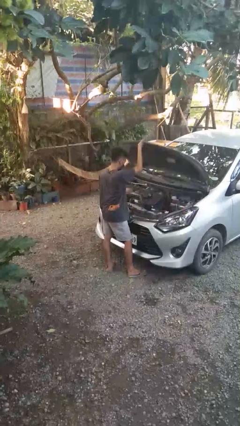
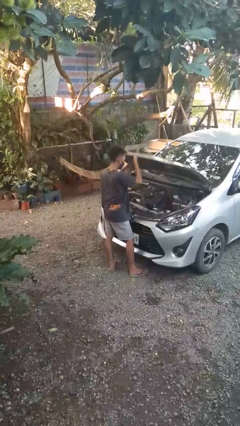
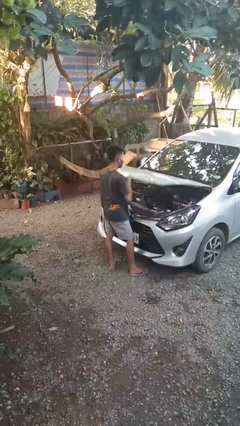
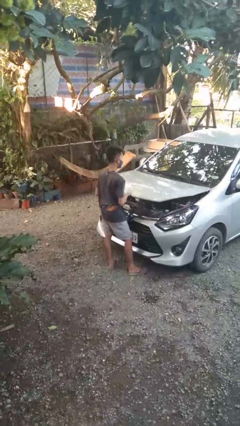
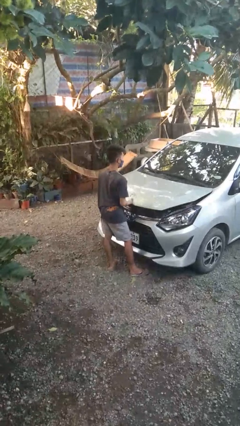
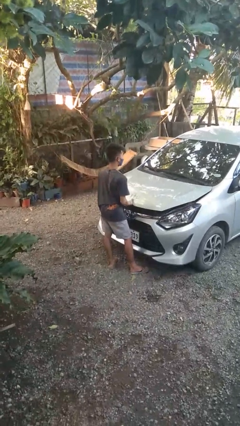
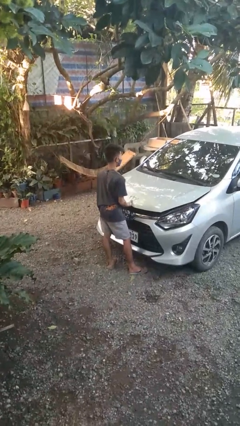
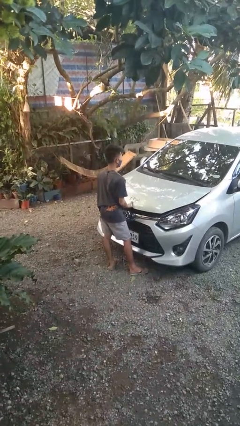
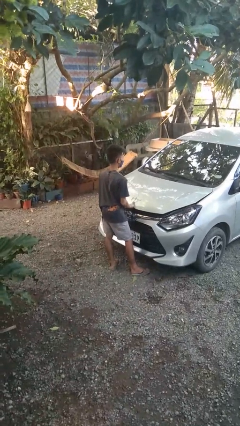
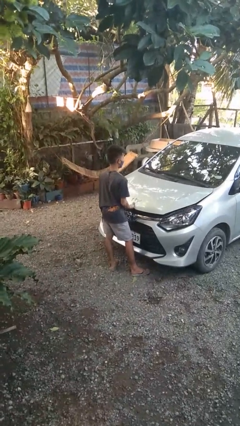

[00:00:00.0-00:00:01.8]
person closes car hood

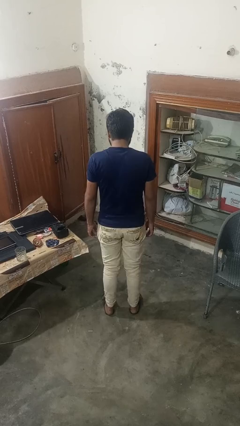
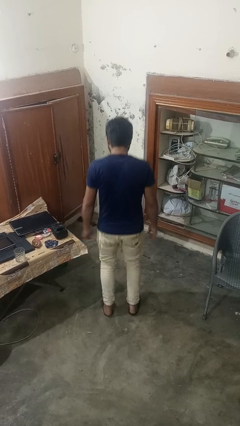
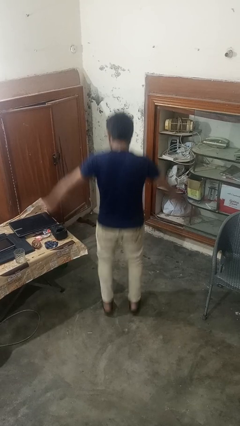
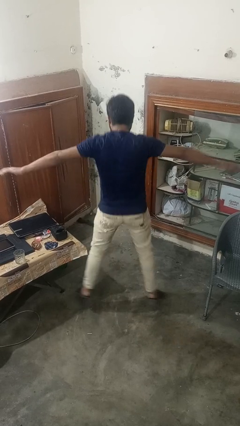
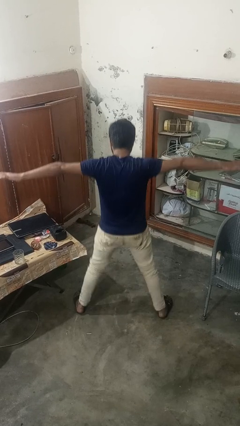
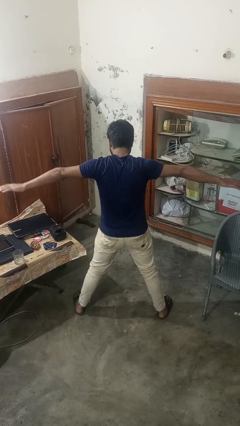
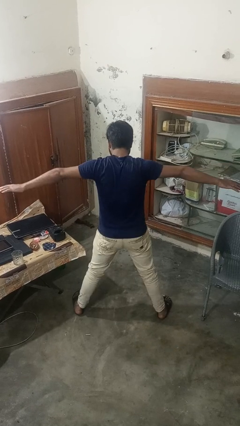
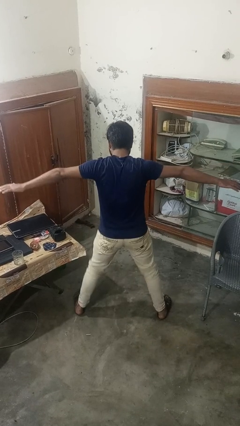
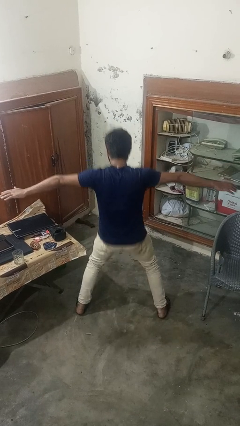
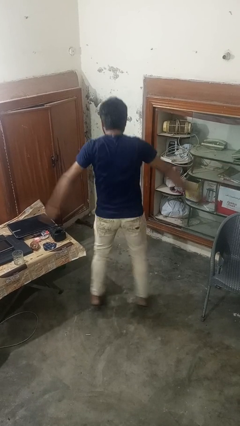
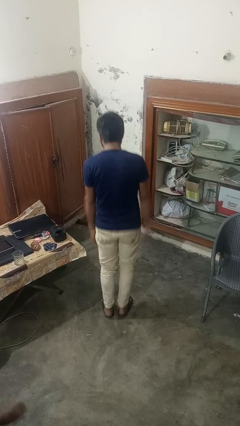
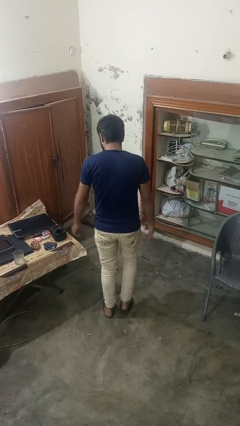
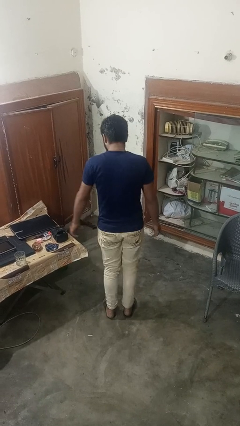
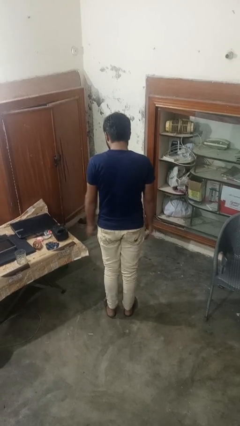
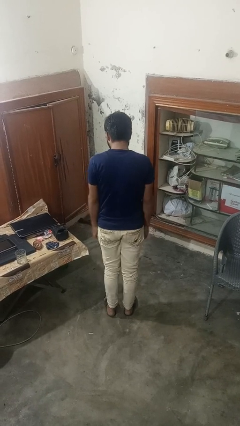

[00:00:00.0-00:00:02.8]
person exercises with jumping jacks

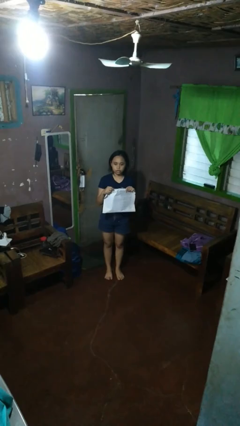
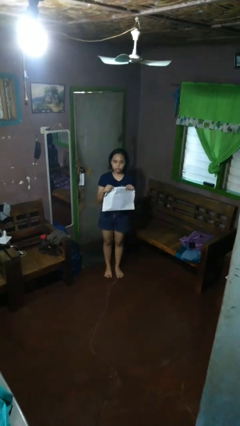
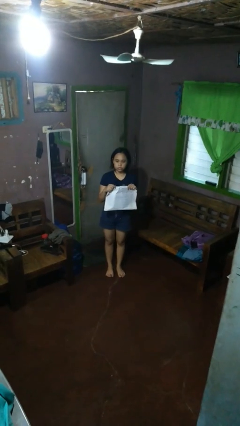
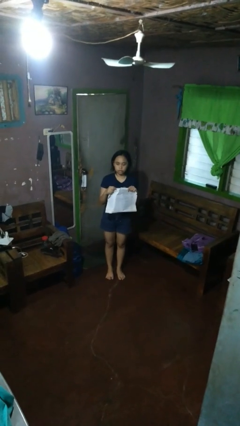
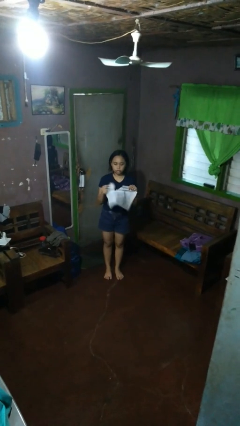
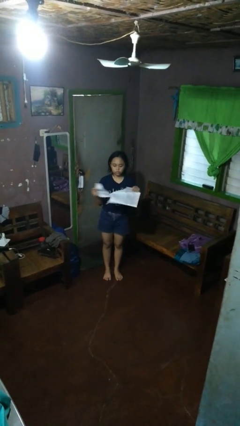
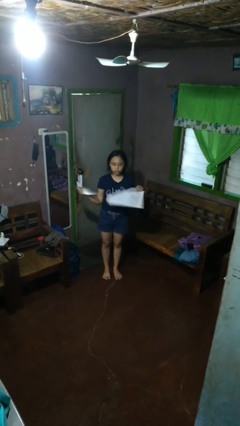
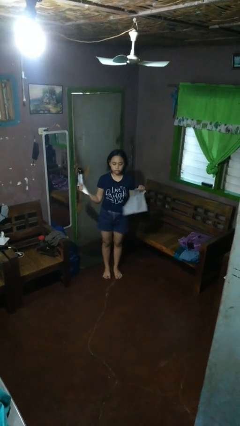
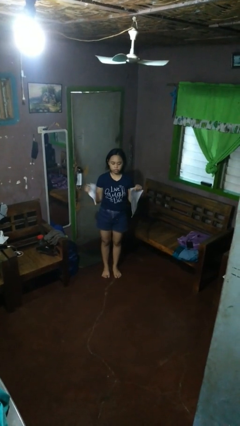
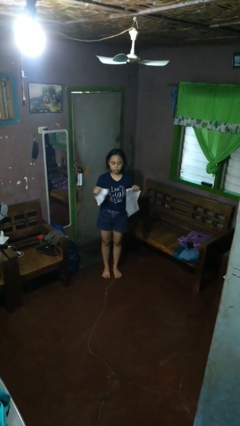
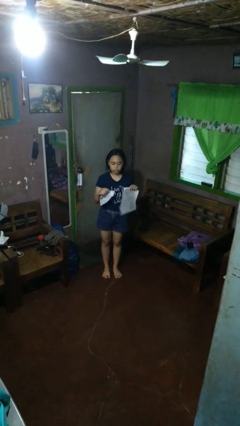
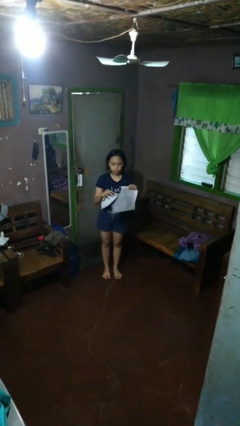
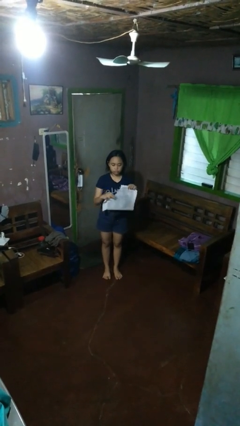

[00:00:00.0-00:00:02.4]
person tears paper

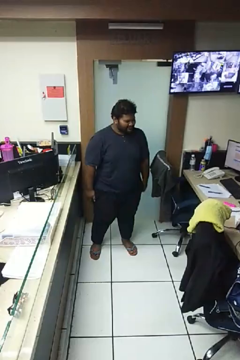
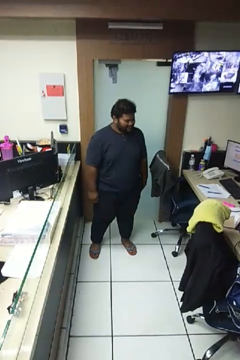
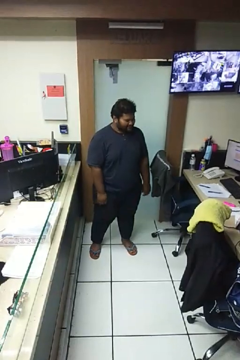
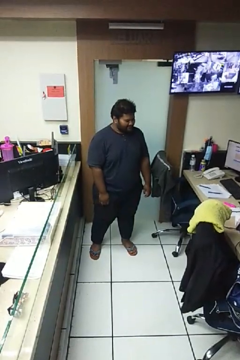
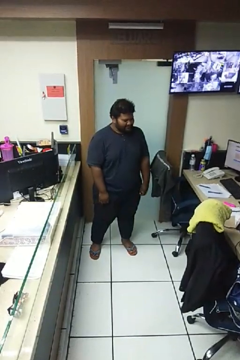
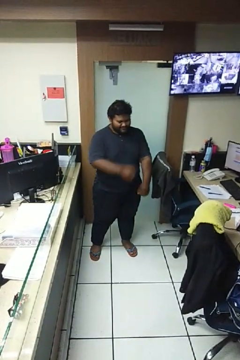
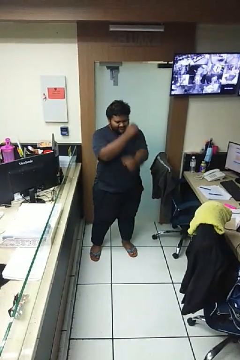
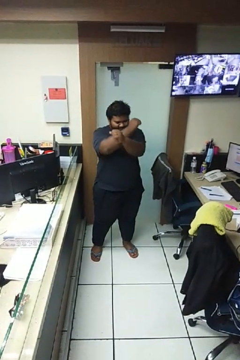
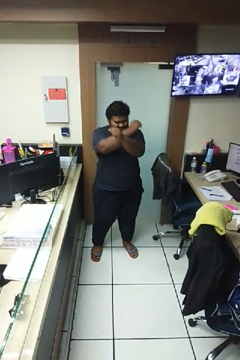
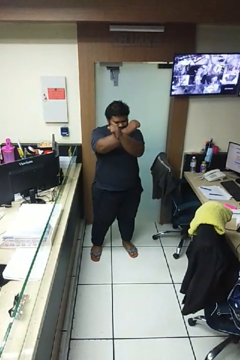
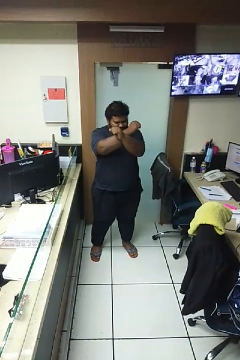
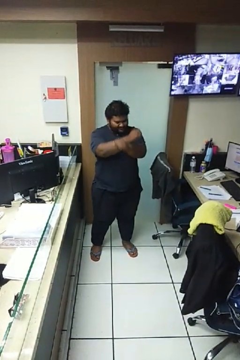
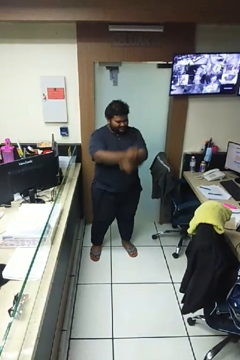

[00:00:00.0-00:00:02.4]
person gestures arms x

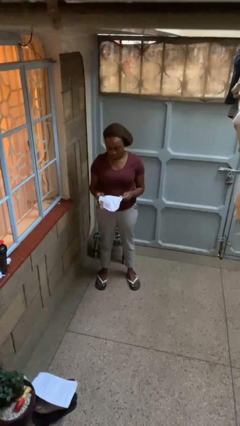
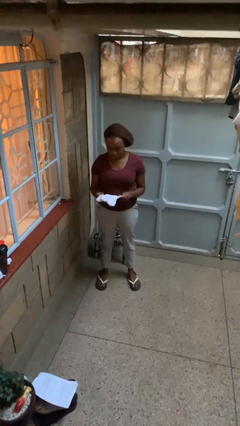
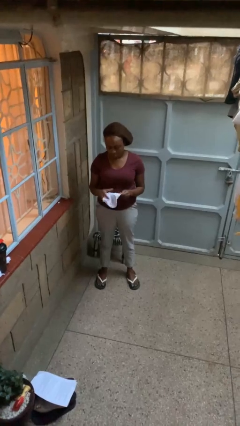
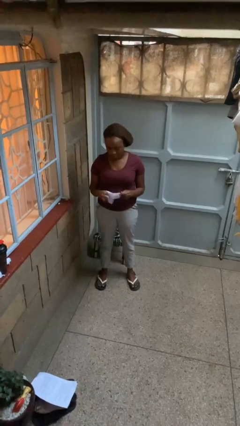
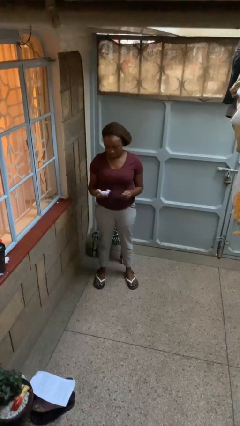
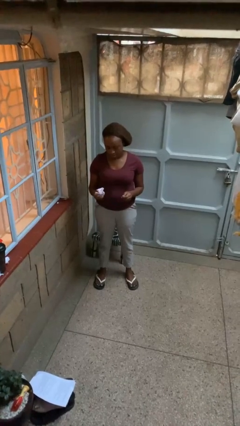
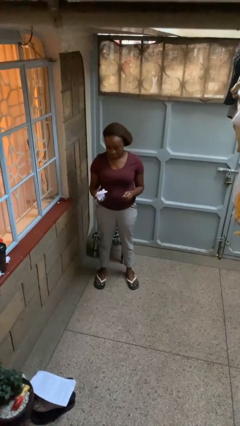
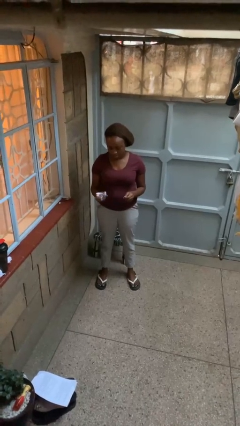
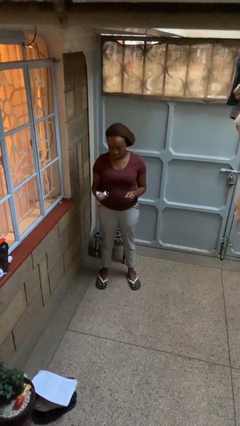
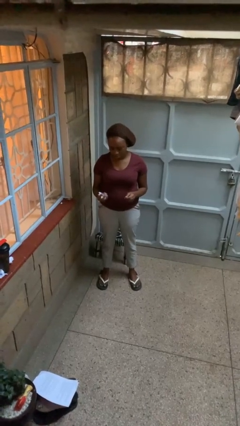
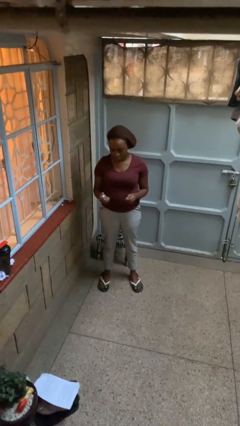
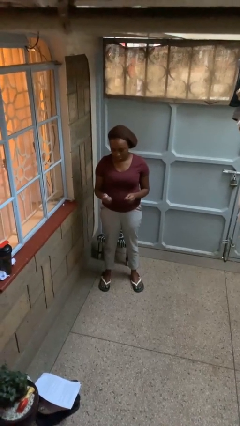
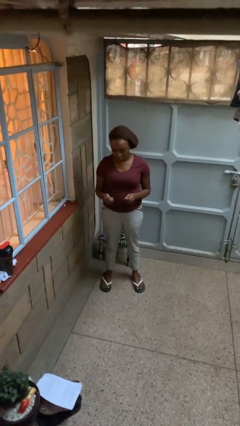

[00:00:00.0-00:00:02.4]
person crumples paper

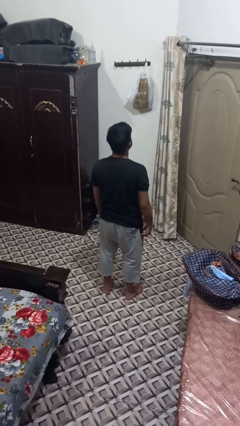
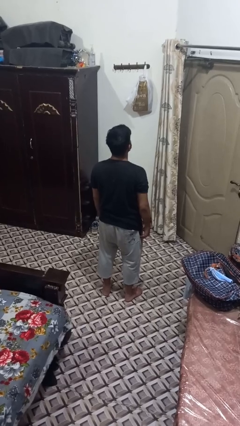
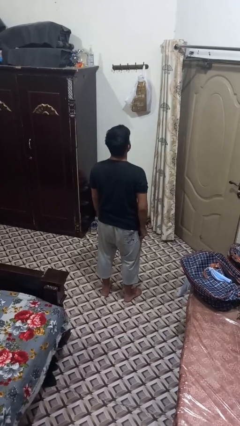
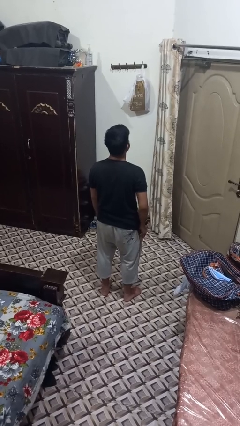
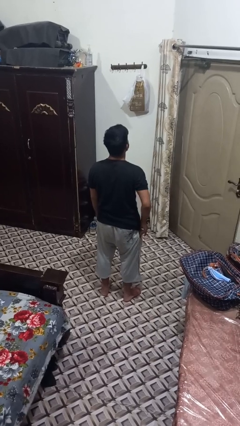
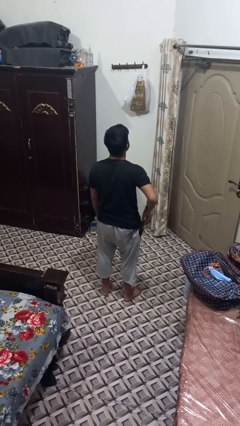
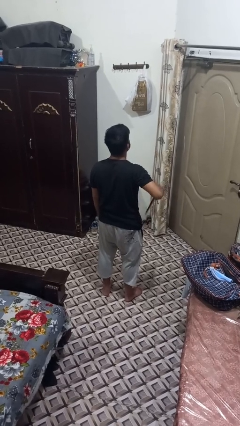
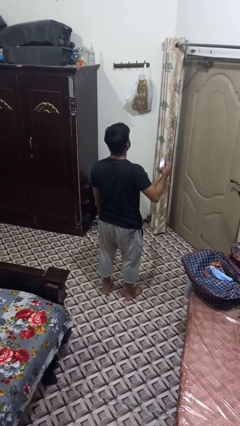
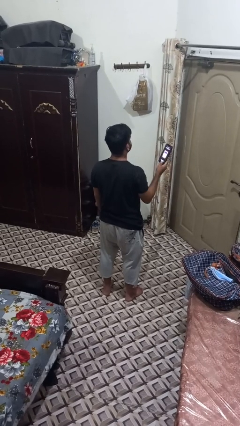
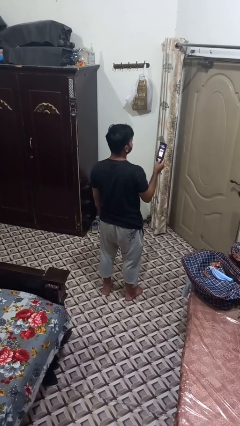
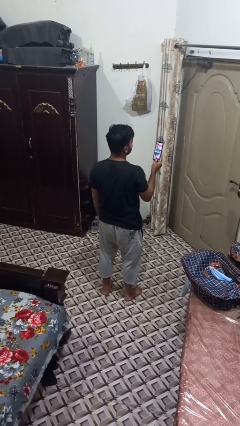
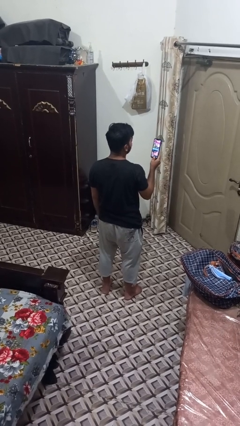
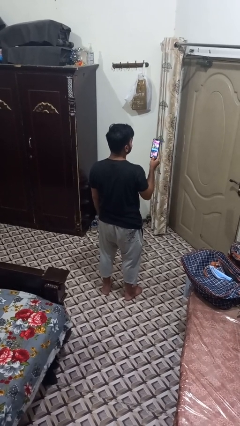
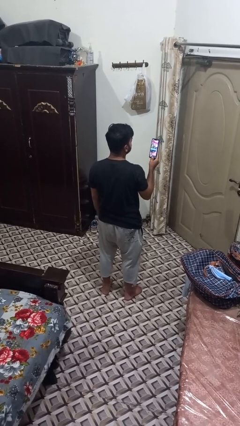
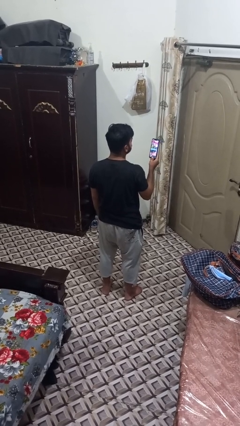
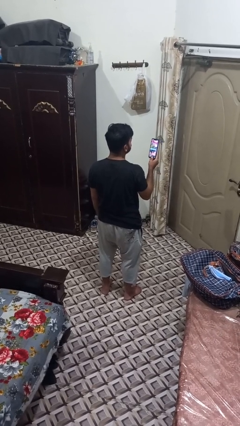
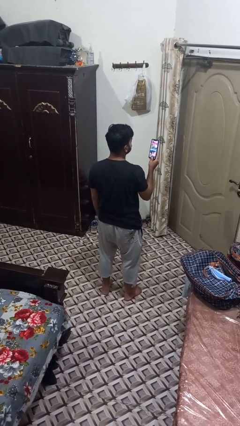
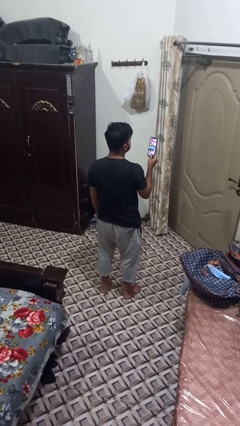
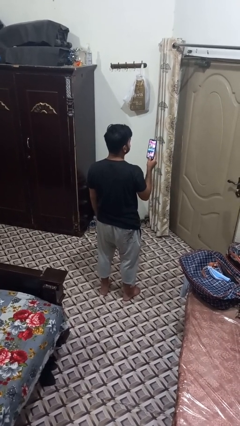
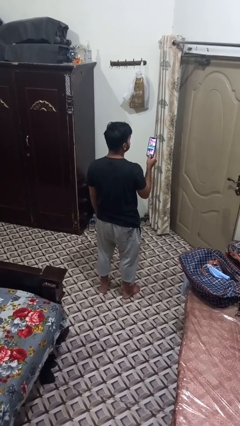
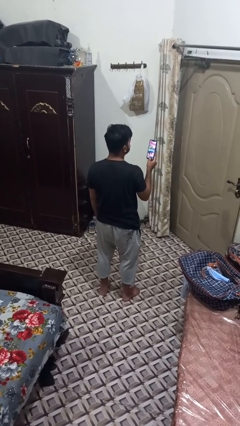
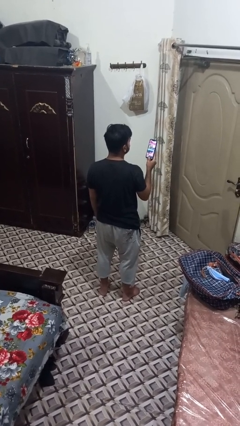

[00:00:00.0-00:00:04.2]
person takes phone from pocket

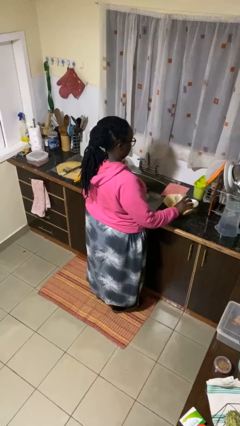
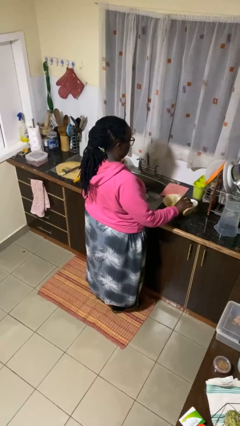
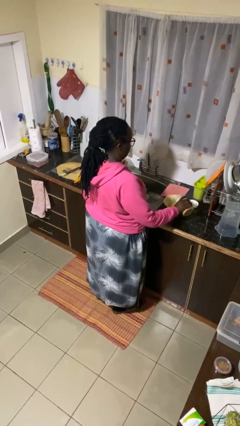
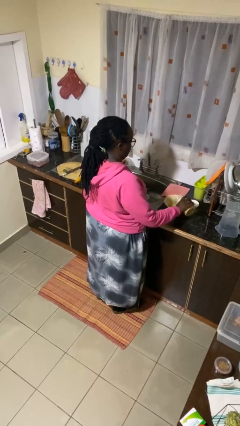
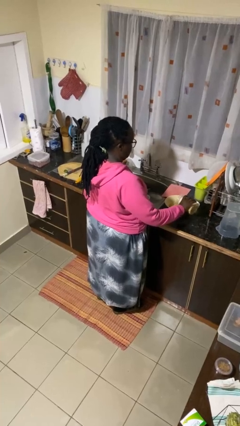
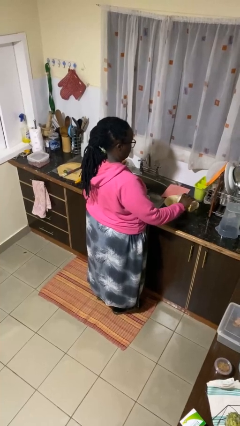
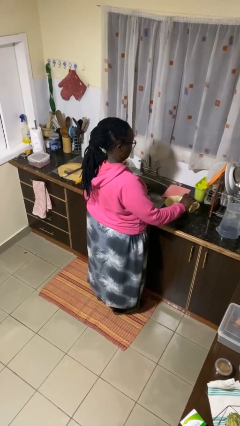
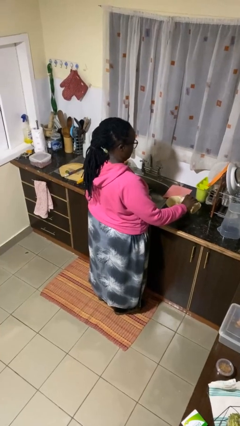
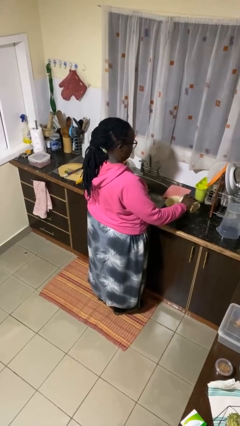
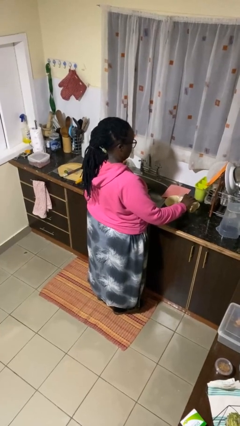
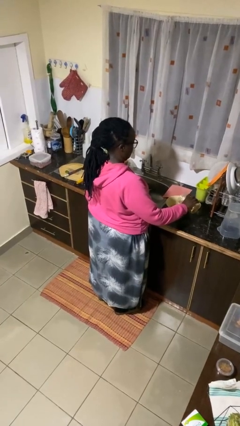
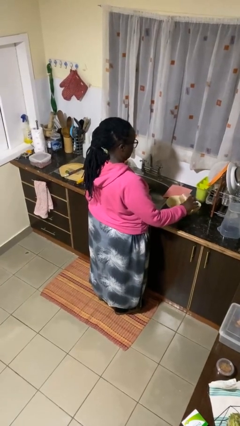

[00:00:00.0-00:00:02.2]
person pours into bowl
